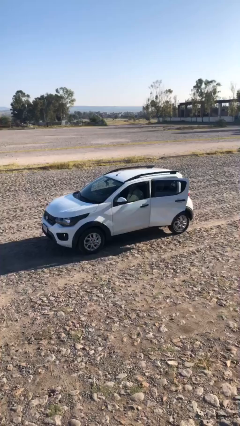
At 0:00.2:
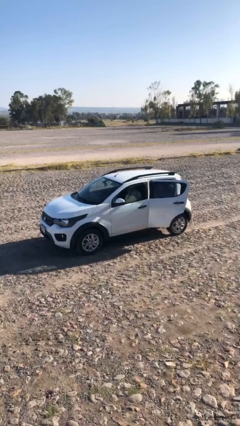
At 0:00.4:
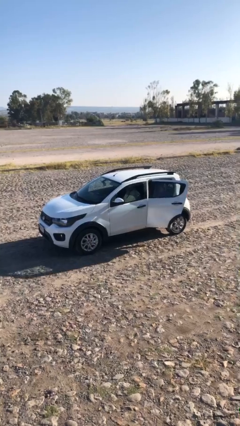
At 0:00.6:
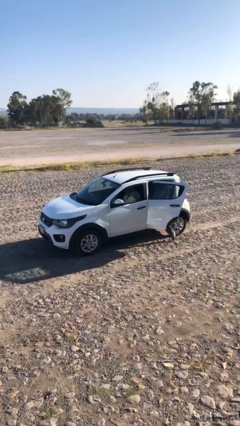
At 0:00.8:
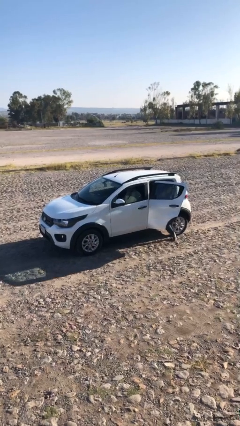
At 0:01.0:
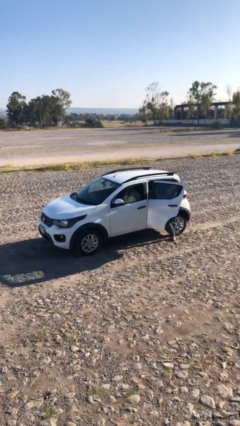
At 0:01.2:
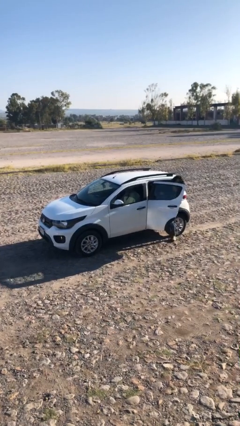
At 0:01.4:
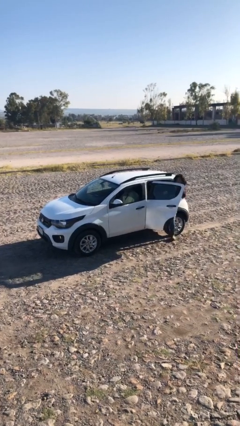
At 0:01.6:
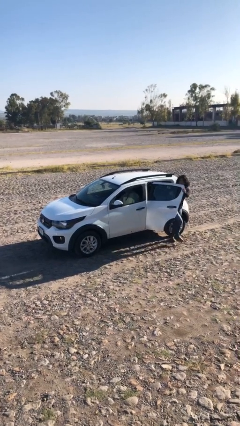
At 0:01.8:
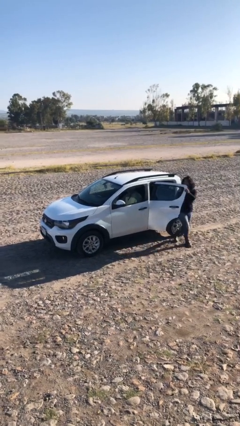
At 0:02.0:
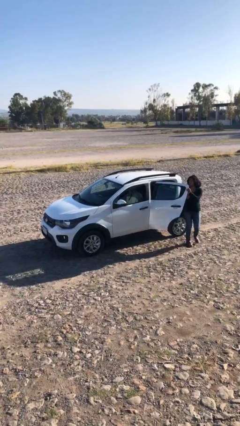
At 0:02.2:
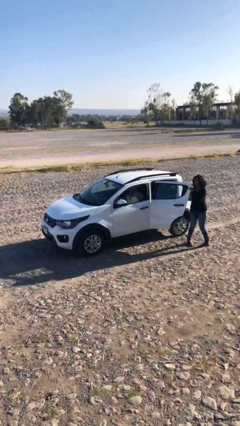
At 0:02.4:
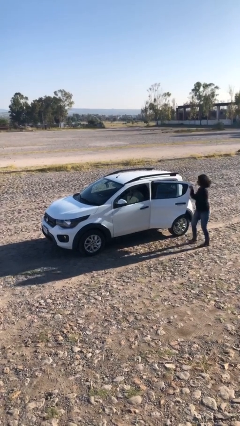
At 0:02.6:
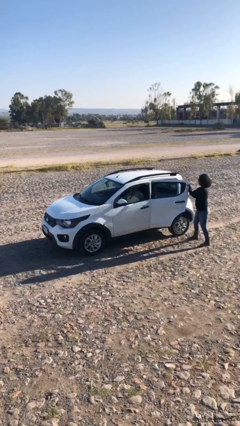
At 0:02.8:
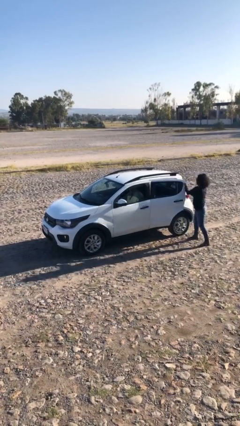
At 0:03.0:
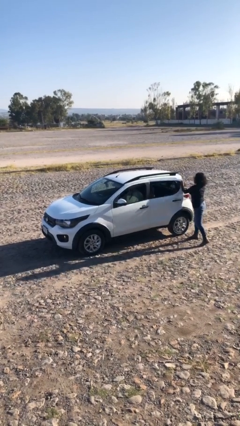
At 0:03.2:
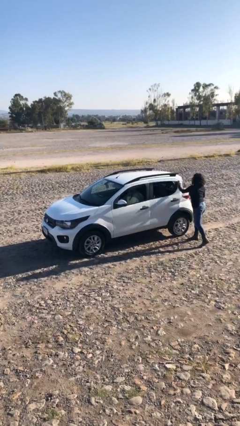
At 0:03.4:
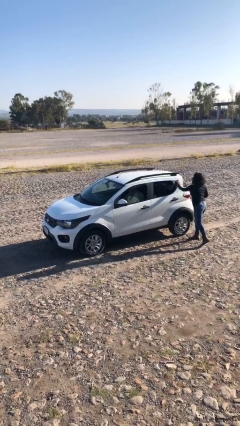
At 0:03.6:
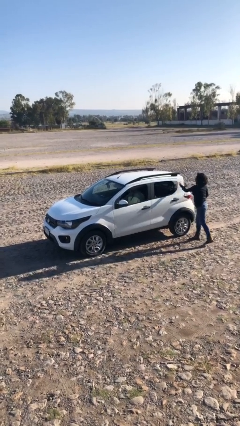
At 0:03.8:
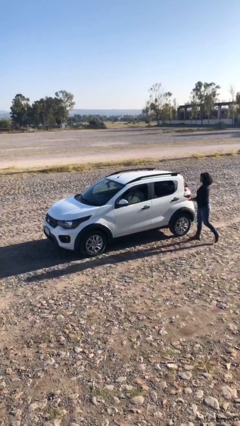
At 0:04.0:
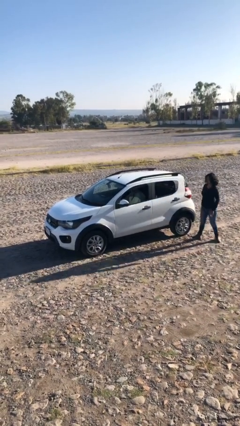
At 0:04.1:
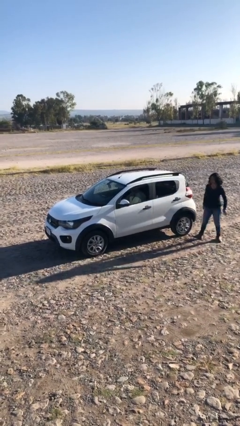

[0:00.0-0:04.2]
car drops off person

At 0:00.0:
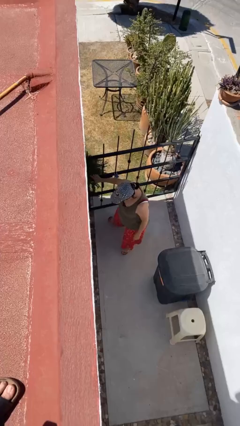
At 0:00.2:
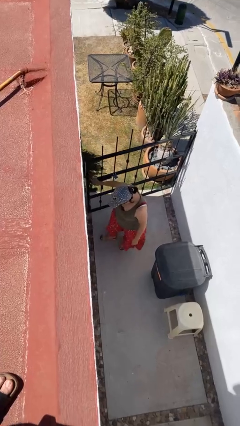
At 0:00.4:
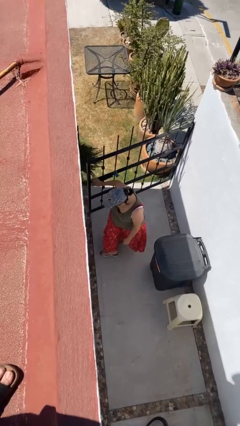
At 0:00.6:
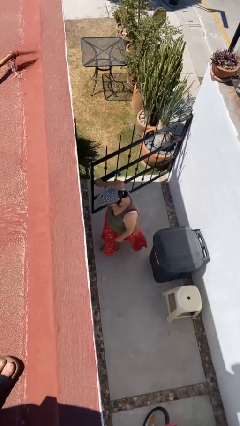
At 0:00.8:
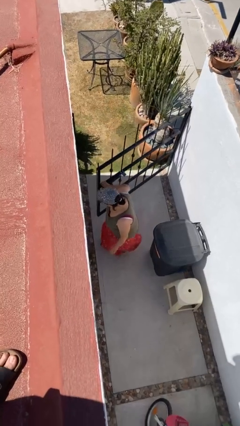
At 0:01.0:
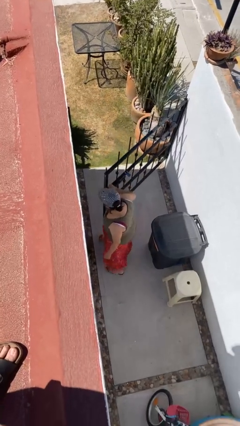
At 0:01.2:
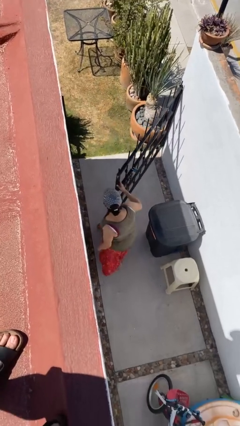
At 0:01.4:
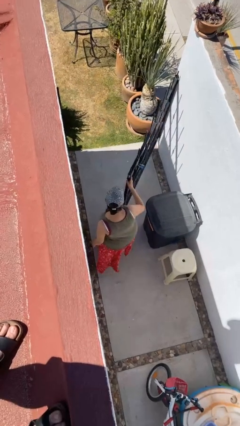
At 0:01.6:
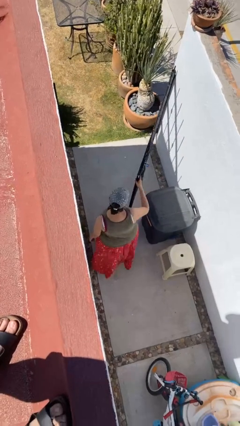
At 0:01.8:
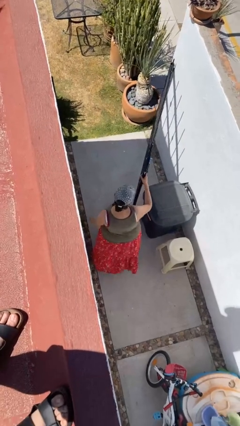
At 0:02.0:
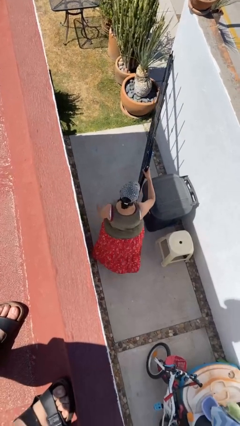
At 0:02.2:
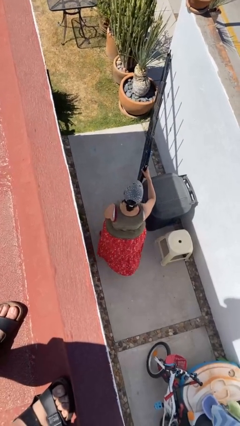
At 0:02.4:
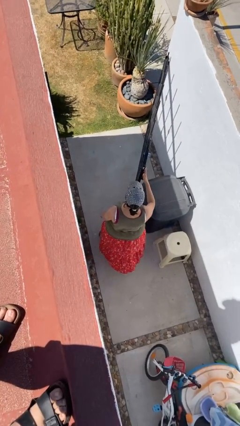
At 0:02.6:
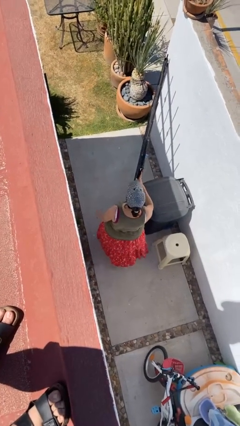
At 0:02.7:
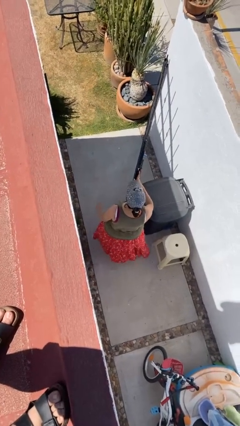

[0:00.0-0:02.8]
person opens facility door

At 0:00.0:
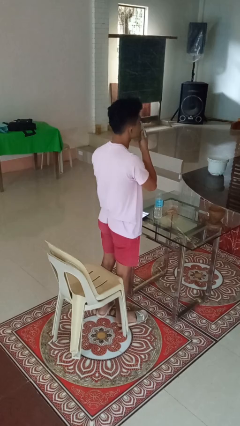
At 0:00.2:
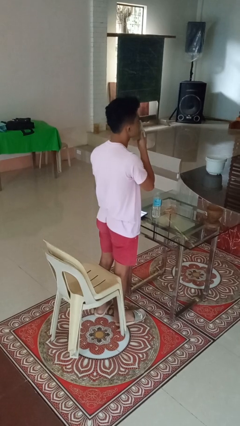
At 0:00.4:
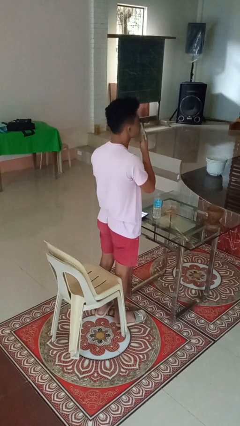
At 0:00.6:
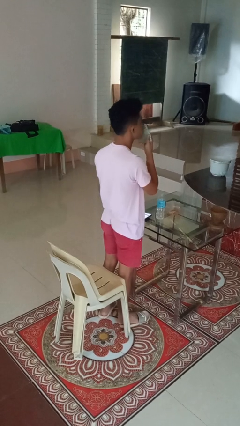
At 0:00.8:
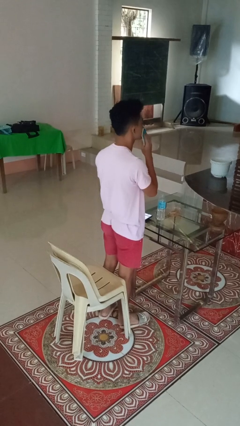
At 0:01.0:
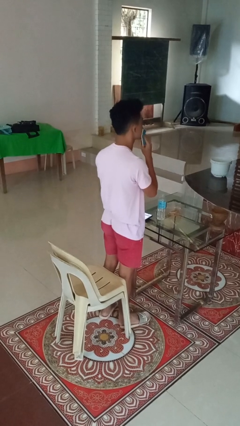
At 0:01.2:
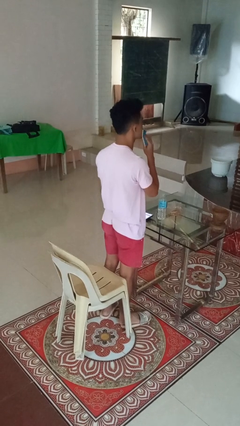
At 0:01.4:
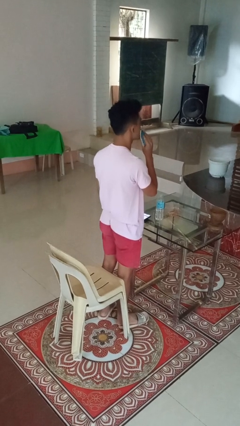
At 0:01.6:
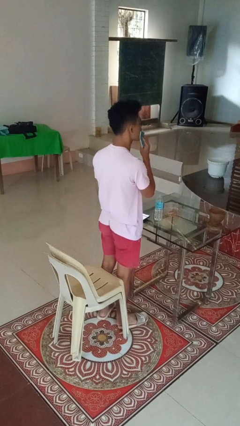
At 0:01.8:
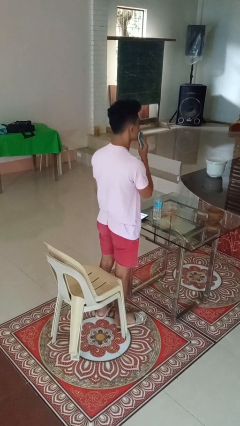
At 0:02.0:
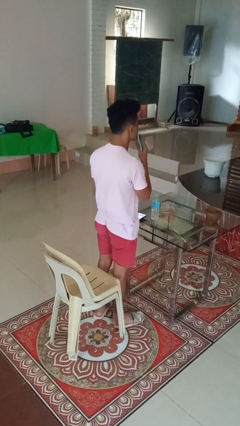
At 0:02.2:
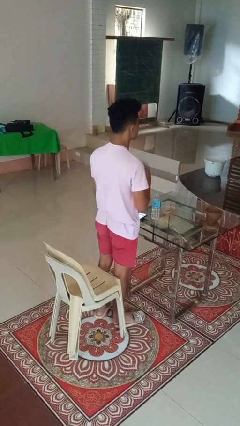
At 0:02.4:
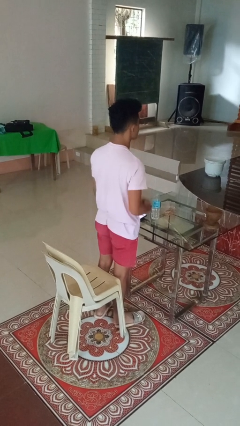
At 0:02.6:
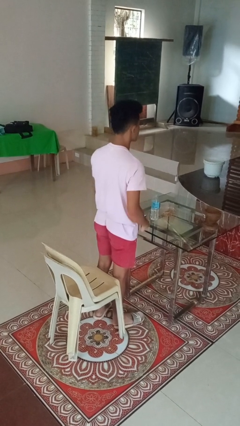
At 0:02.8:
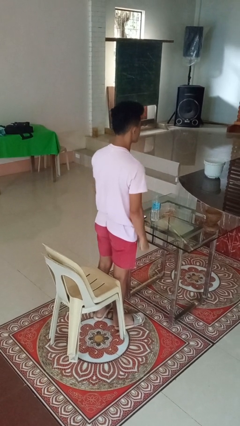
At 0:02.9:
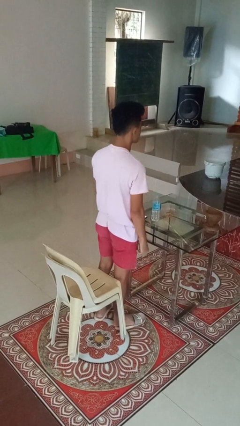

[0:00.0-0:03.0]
person wipes mouth with napkin

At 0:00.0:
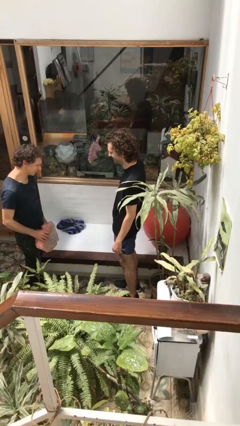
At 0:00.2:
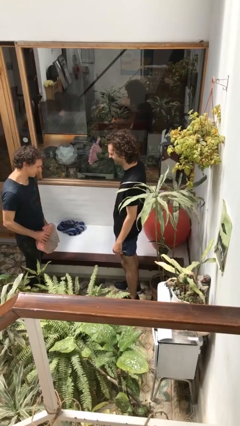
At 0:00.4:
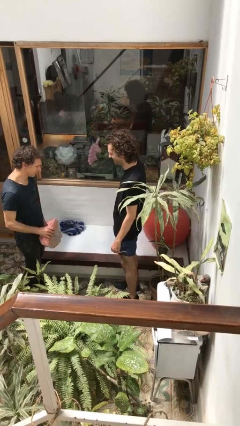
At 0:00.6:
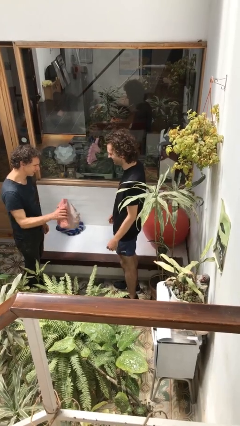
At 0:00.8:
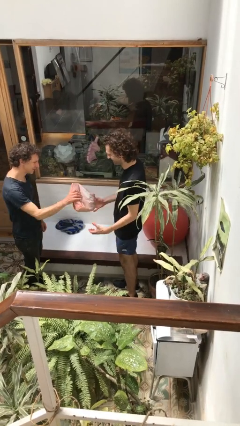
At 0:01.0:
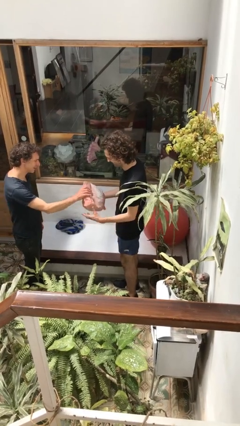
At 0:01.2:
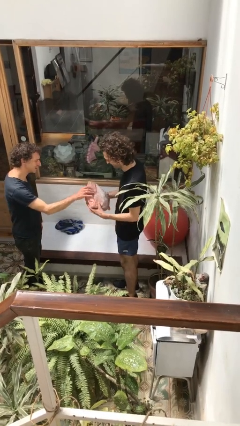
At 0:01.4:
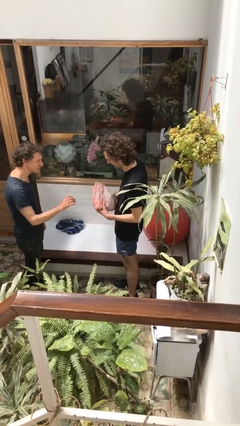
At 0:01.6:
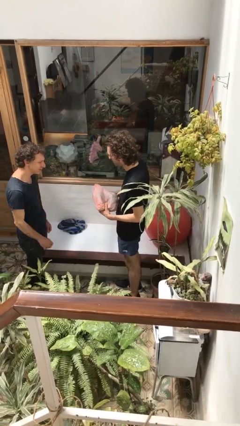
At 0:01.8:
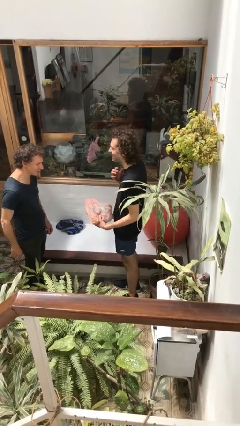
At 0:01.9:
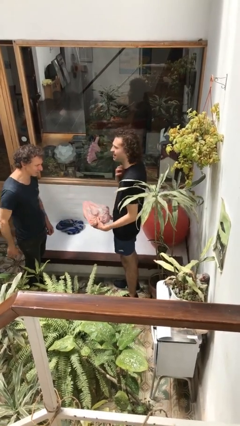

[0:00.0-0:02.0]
person transfers object to person

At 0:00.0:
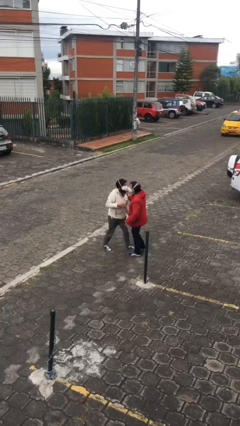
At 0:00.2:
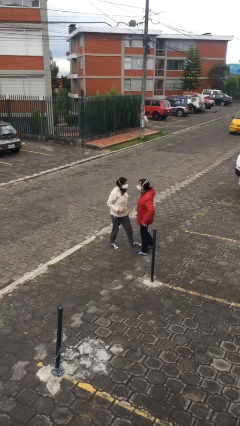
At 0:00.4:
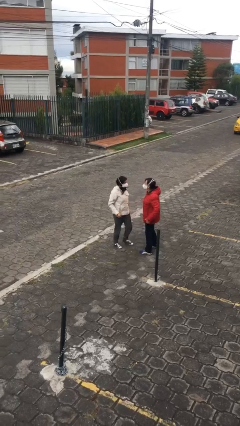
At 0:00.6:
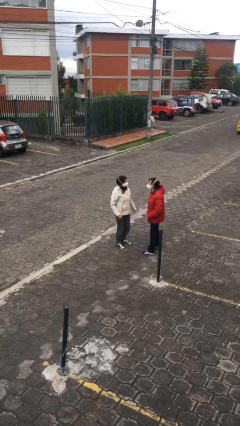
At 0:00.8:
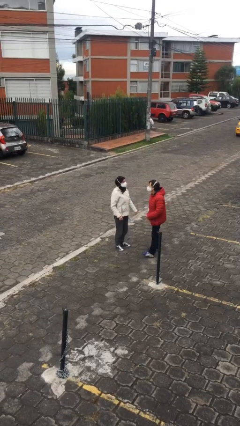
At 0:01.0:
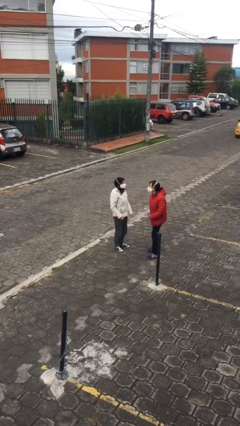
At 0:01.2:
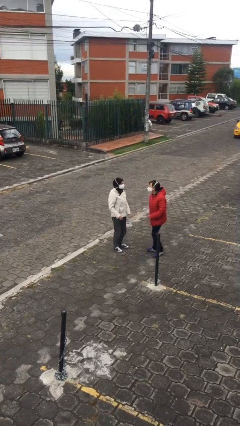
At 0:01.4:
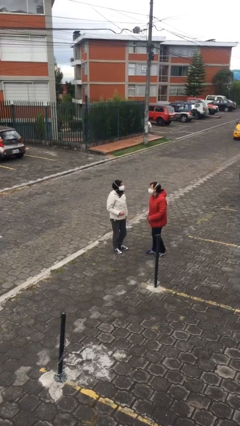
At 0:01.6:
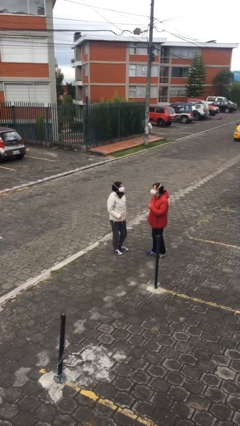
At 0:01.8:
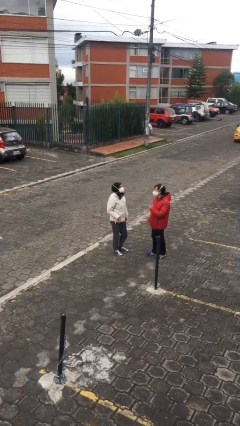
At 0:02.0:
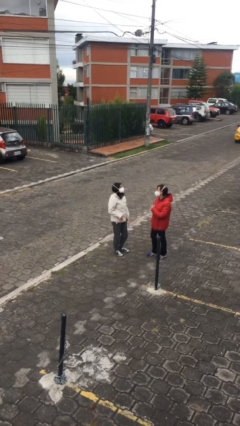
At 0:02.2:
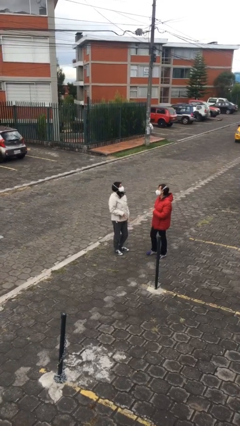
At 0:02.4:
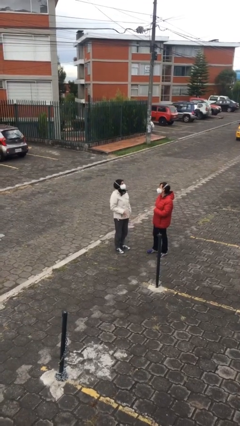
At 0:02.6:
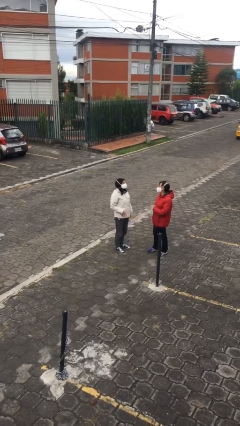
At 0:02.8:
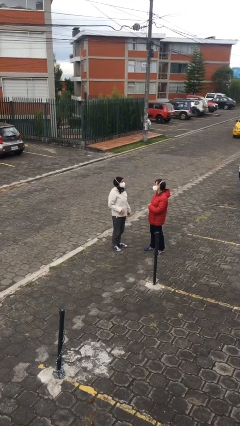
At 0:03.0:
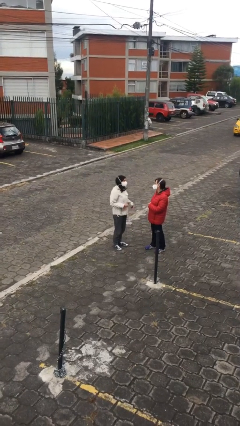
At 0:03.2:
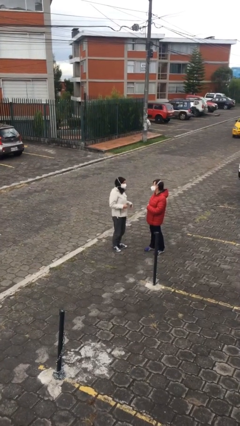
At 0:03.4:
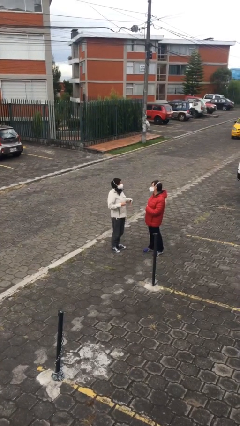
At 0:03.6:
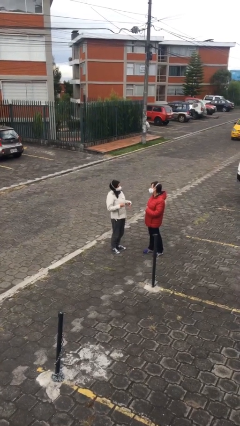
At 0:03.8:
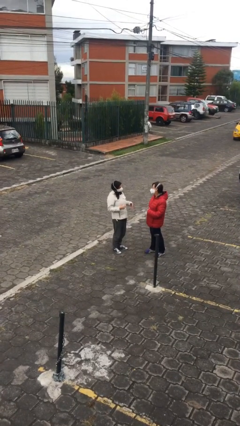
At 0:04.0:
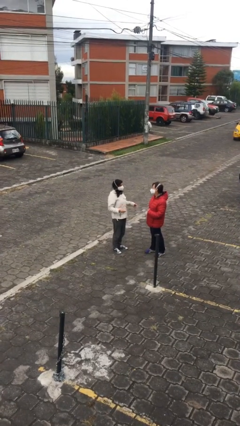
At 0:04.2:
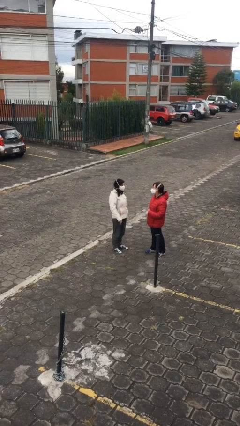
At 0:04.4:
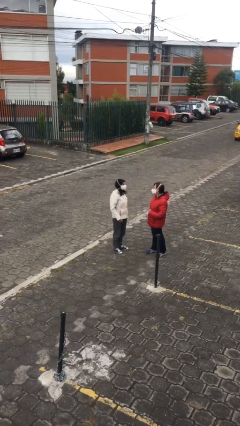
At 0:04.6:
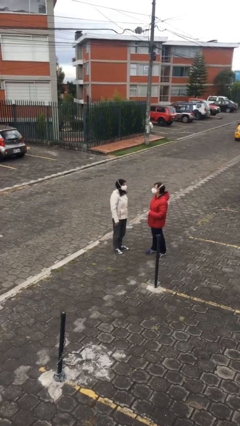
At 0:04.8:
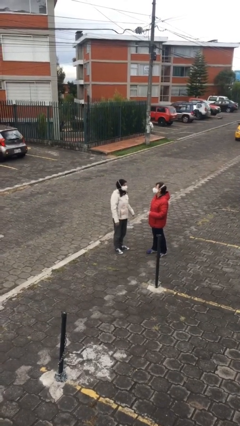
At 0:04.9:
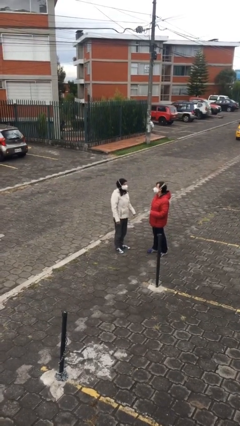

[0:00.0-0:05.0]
person talks to person

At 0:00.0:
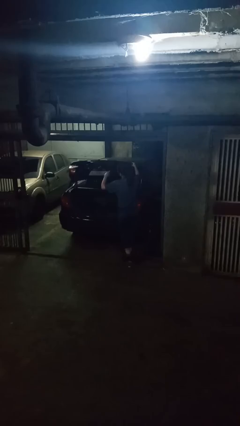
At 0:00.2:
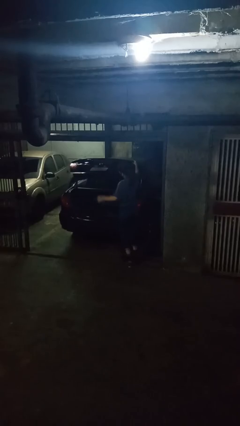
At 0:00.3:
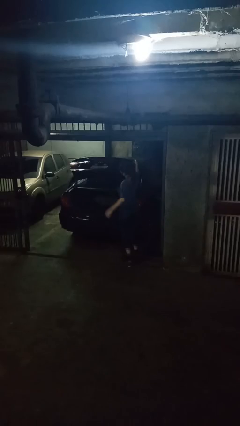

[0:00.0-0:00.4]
person opens car trunk

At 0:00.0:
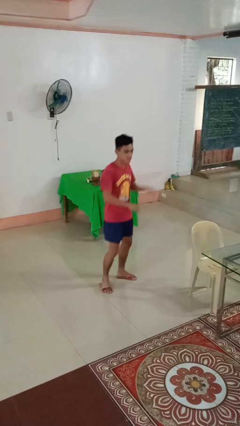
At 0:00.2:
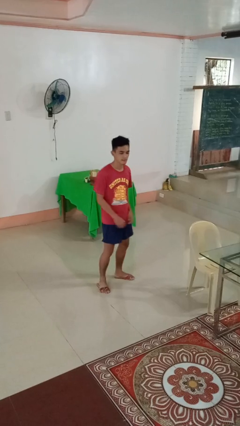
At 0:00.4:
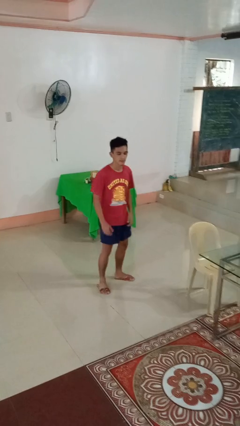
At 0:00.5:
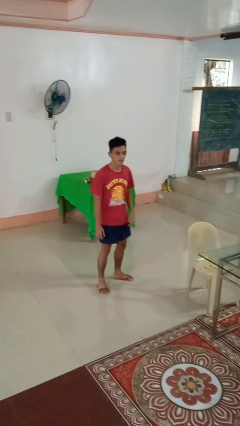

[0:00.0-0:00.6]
person karate chop
